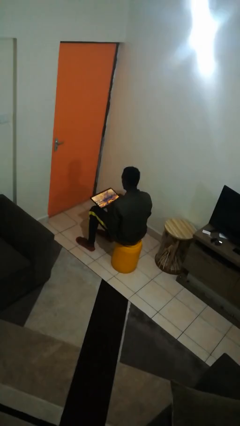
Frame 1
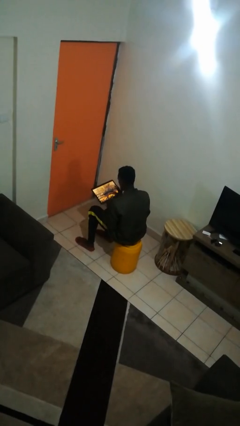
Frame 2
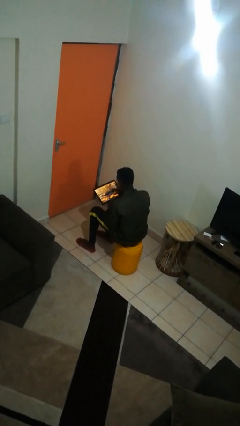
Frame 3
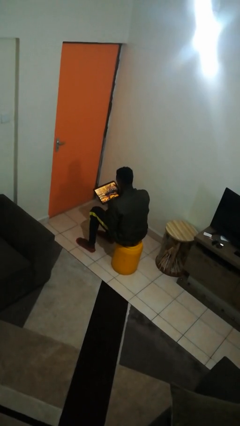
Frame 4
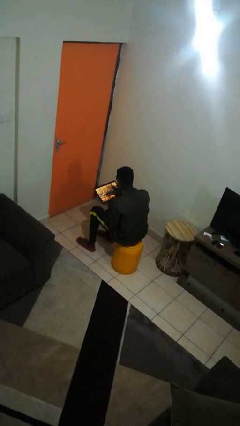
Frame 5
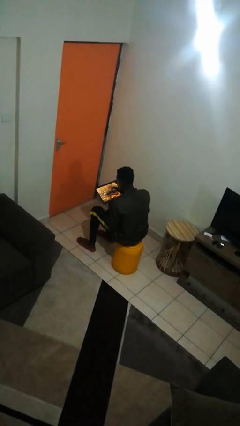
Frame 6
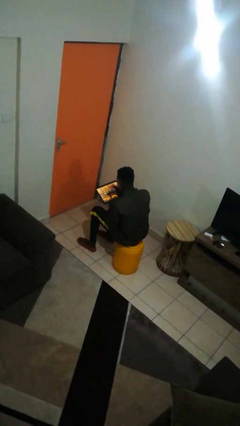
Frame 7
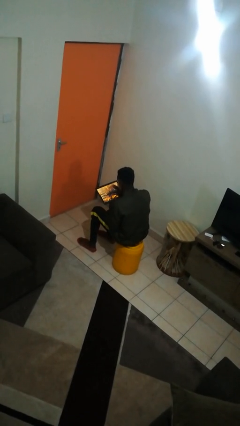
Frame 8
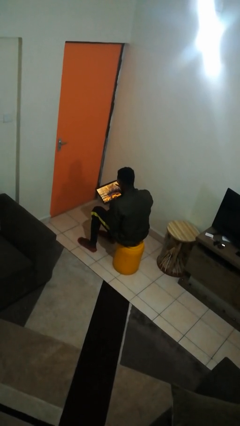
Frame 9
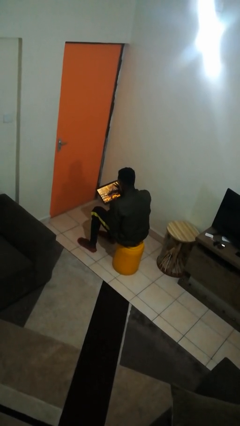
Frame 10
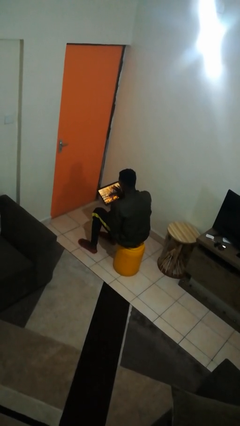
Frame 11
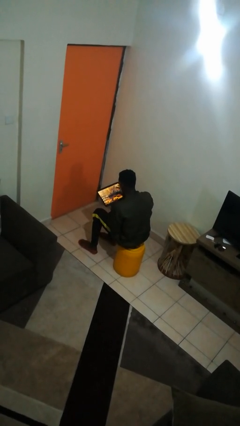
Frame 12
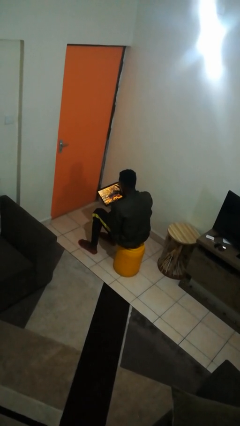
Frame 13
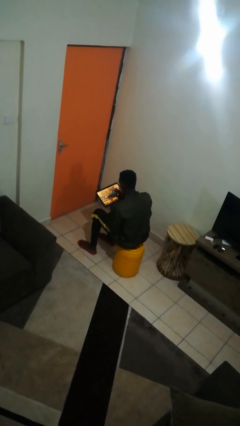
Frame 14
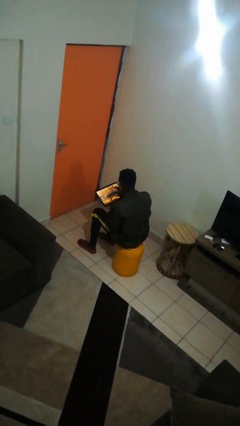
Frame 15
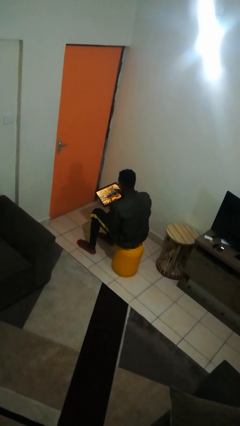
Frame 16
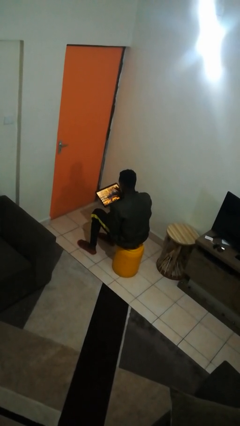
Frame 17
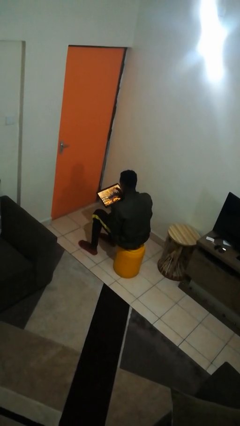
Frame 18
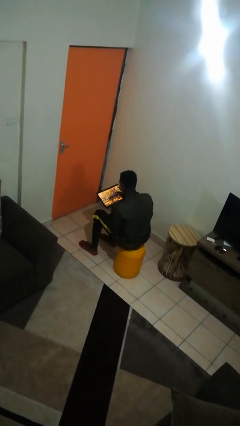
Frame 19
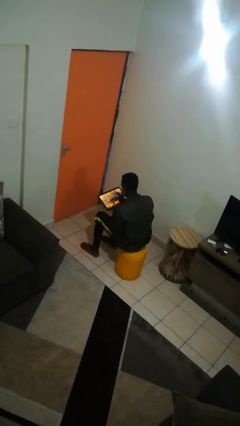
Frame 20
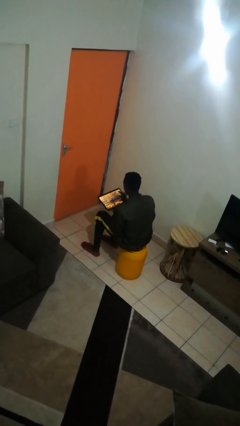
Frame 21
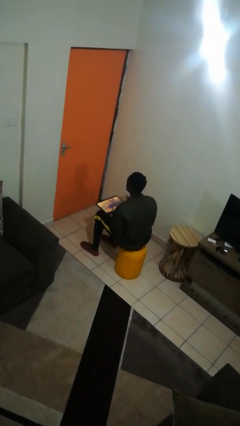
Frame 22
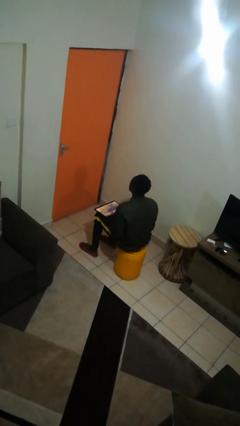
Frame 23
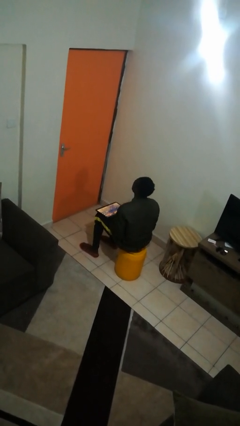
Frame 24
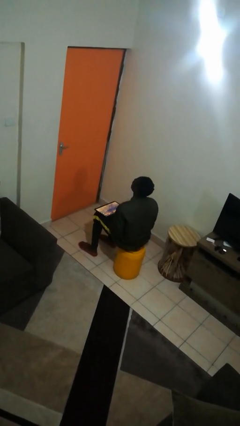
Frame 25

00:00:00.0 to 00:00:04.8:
person interacts with tablet

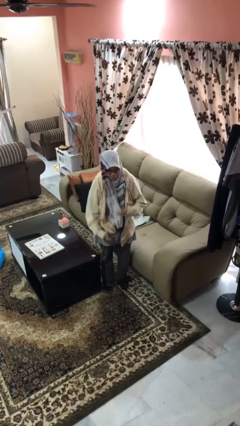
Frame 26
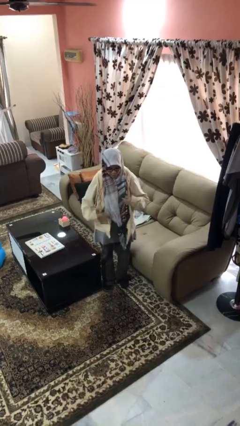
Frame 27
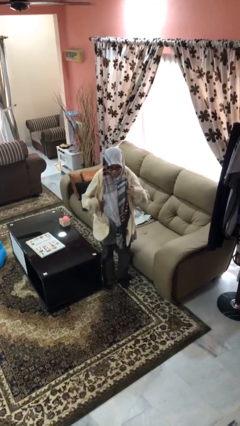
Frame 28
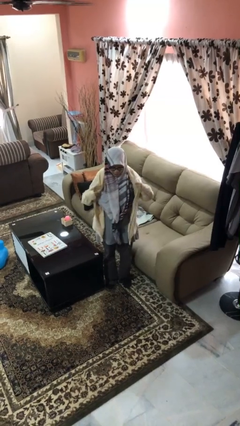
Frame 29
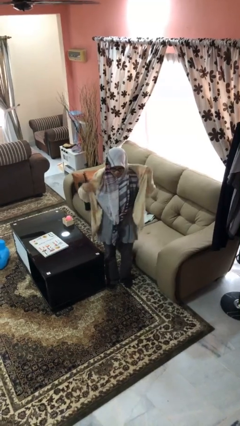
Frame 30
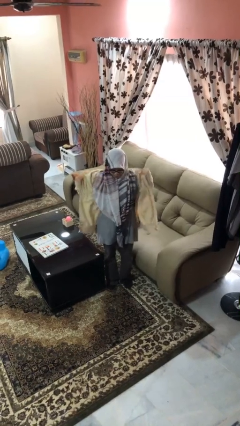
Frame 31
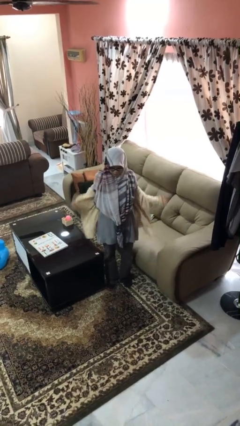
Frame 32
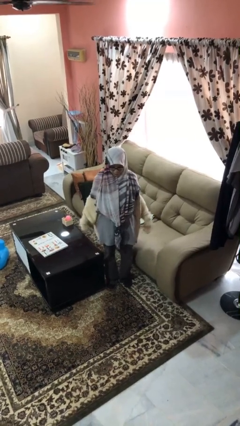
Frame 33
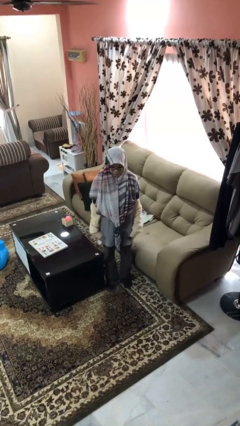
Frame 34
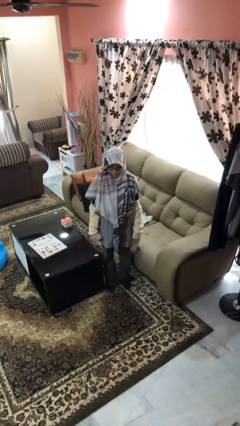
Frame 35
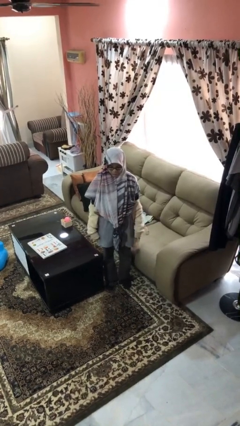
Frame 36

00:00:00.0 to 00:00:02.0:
person takes off jacket

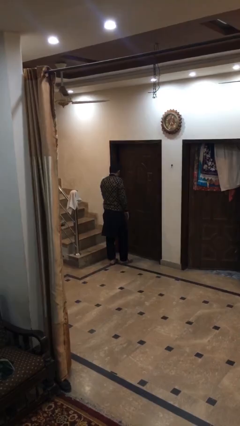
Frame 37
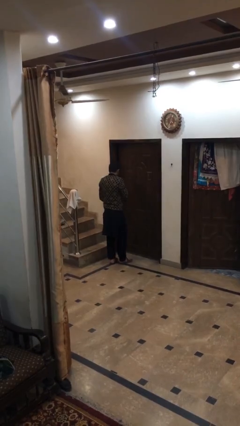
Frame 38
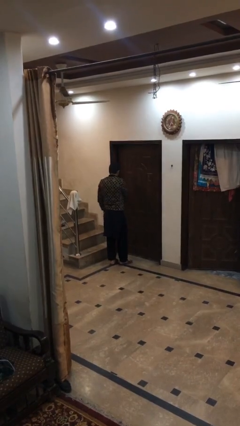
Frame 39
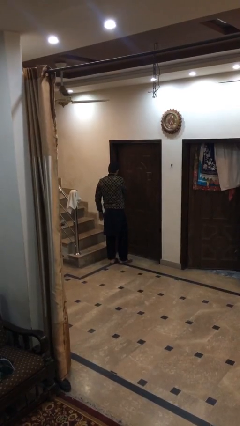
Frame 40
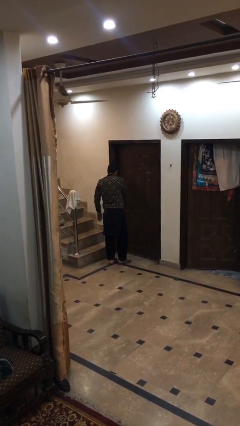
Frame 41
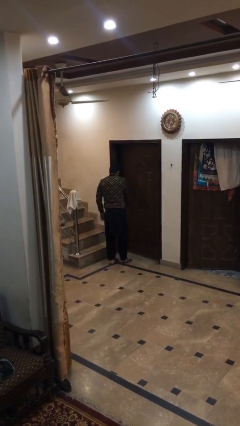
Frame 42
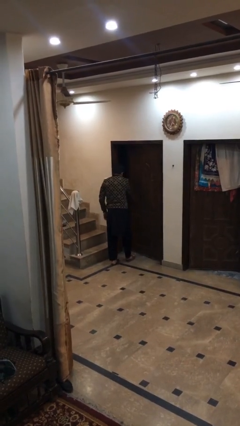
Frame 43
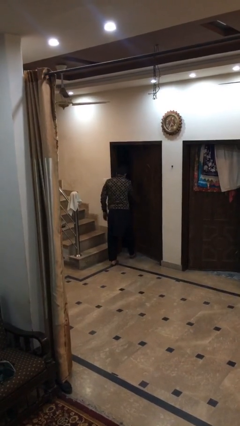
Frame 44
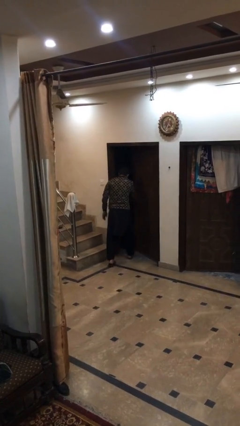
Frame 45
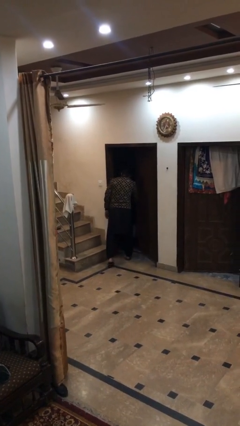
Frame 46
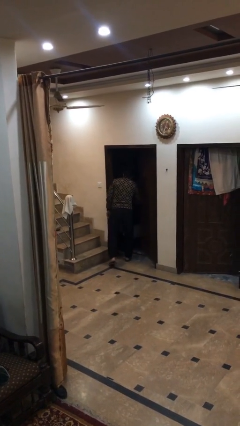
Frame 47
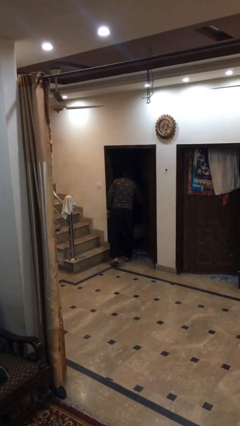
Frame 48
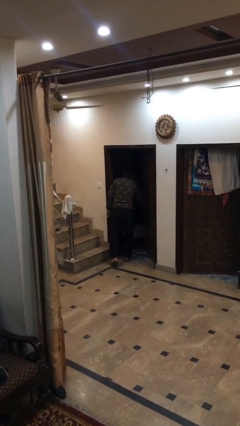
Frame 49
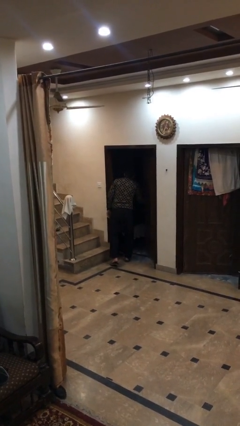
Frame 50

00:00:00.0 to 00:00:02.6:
person opens facility door

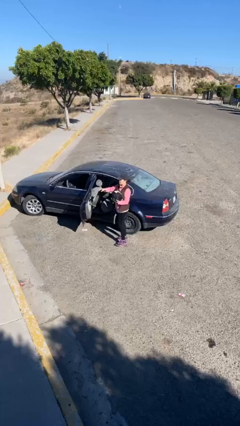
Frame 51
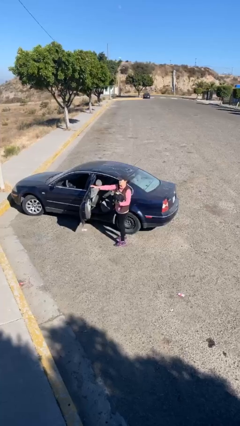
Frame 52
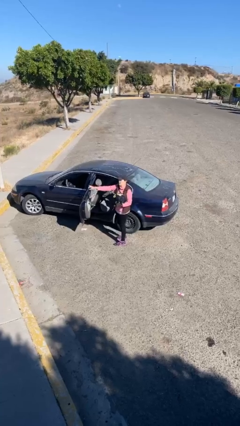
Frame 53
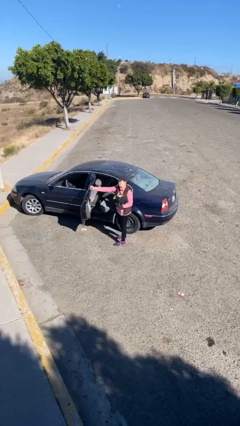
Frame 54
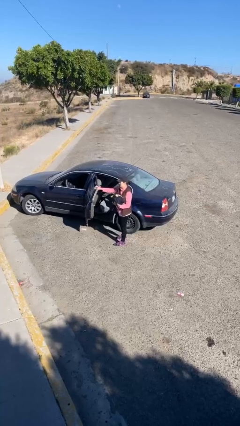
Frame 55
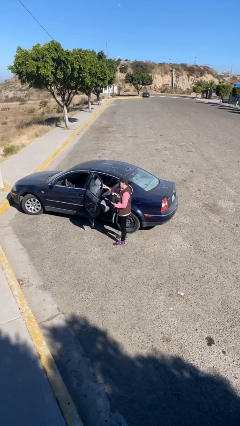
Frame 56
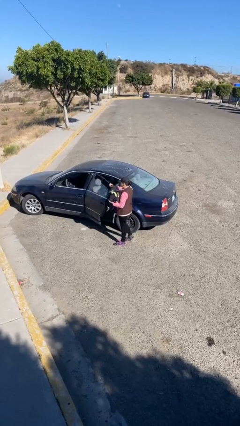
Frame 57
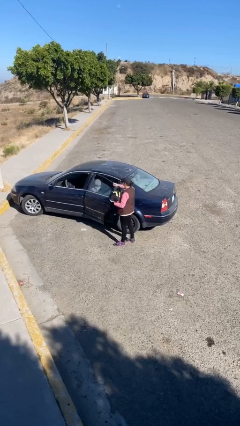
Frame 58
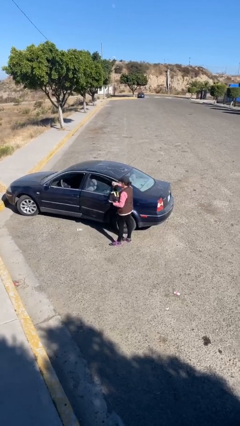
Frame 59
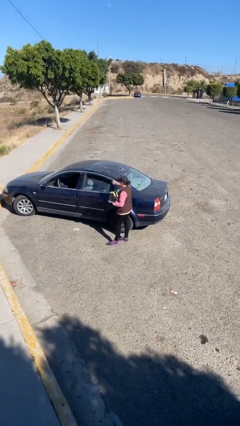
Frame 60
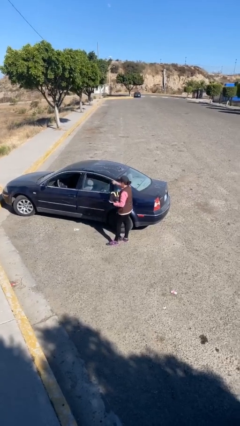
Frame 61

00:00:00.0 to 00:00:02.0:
person closes car door

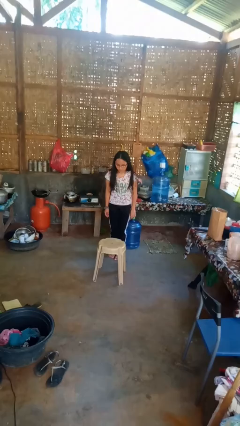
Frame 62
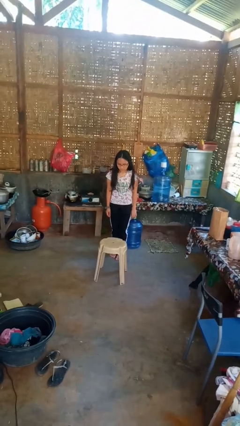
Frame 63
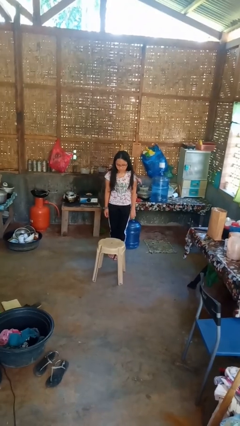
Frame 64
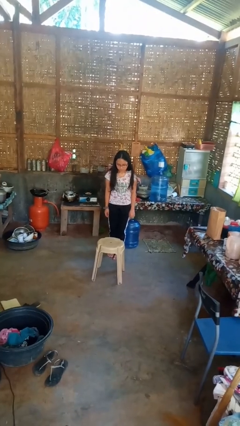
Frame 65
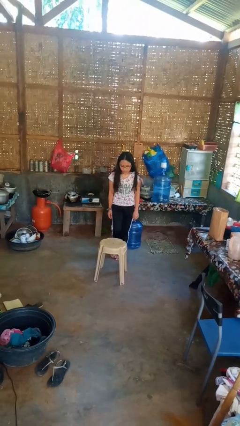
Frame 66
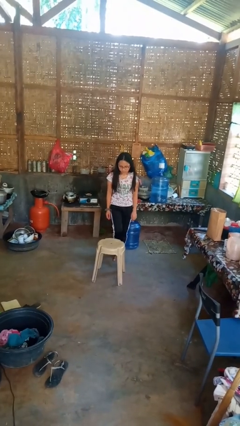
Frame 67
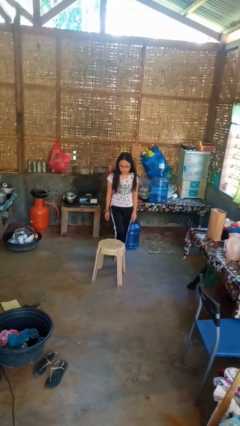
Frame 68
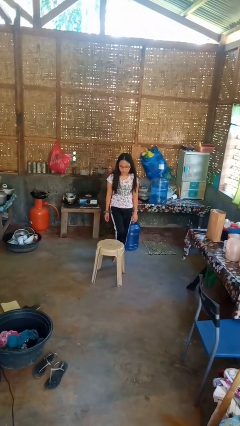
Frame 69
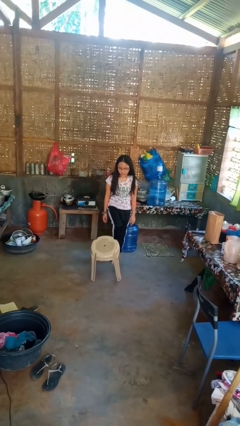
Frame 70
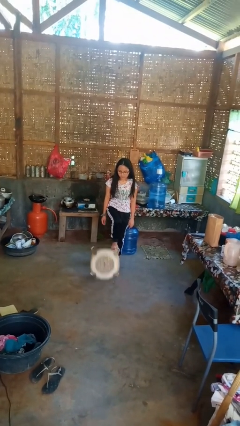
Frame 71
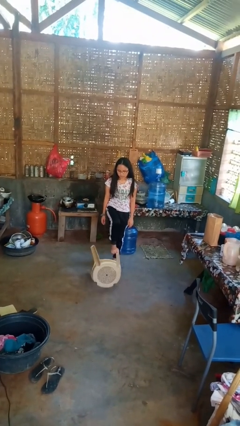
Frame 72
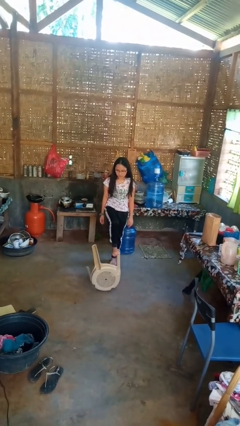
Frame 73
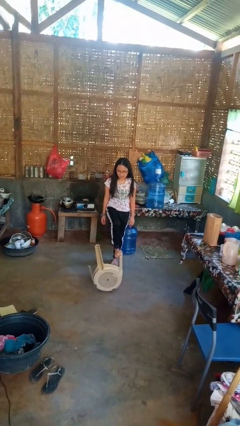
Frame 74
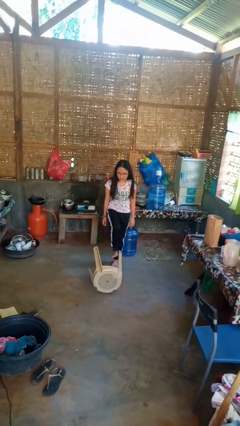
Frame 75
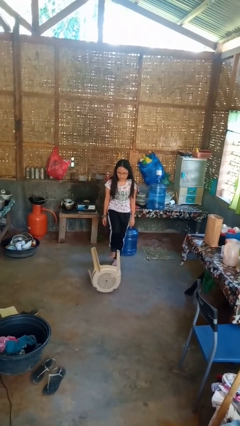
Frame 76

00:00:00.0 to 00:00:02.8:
person knocks over furniture

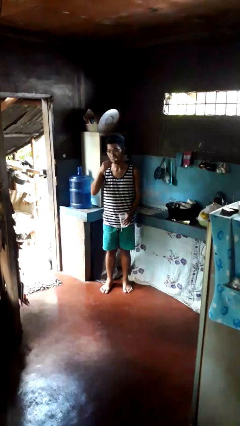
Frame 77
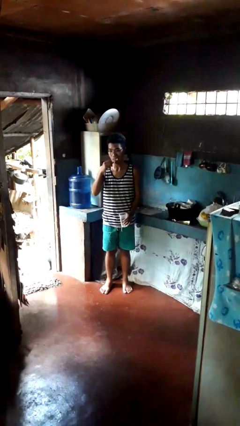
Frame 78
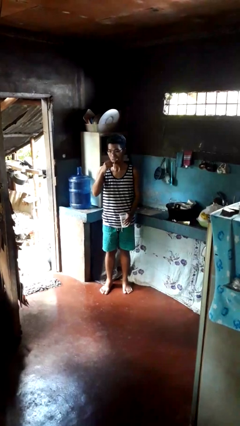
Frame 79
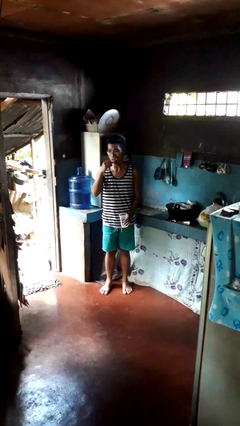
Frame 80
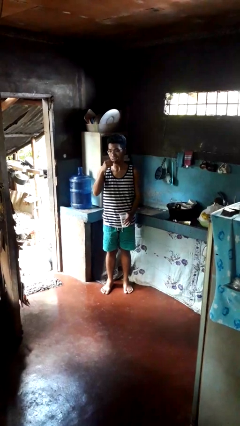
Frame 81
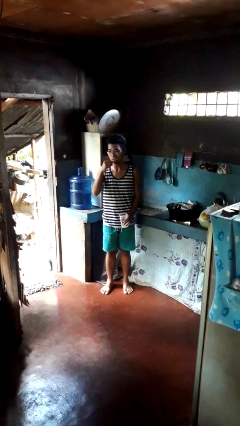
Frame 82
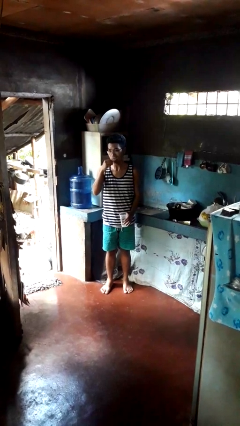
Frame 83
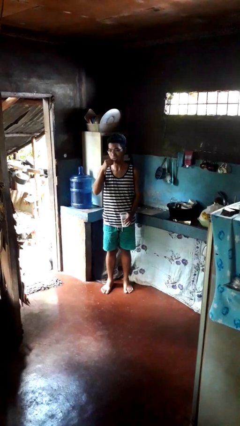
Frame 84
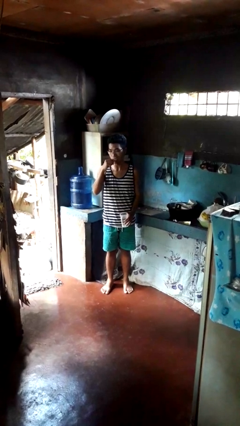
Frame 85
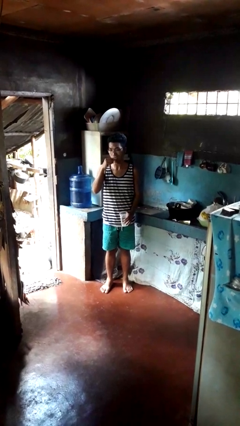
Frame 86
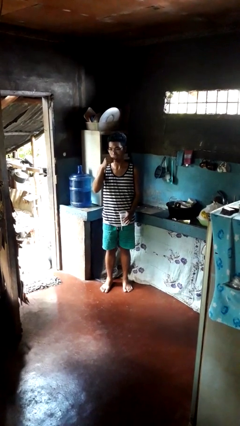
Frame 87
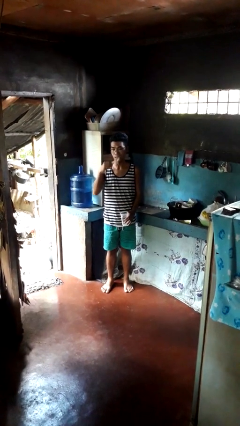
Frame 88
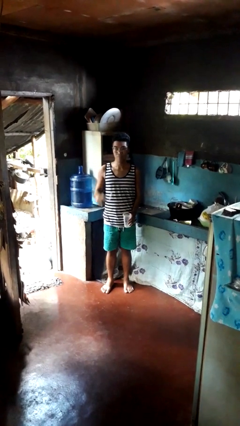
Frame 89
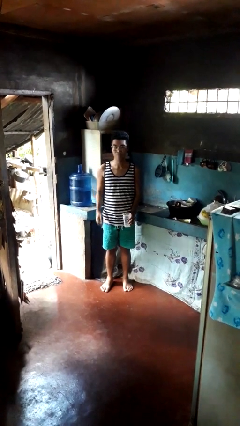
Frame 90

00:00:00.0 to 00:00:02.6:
person brushes teeth

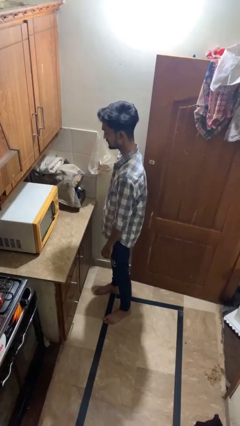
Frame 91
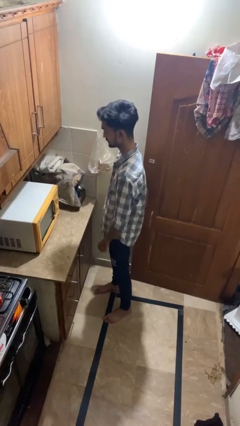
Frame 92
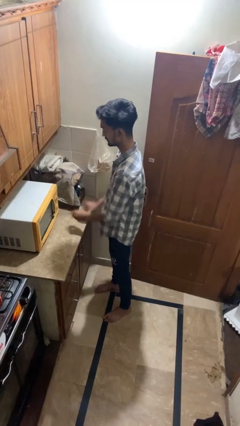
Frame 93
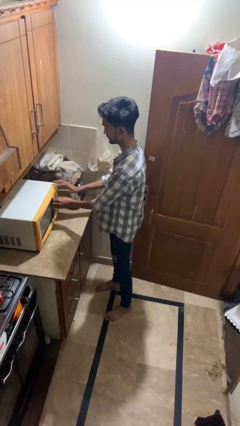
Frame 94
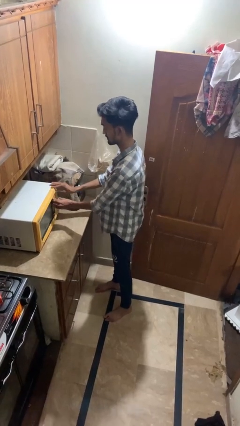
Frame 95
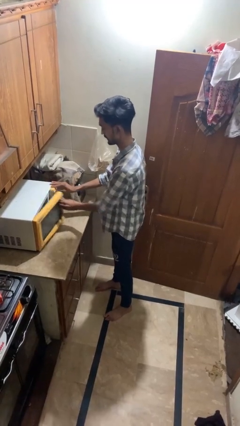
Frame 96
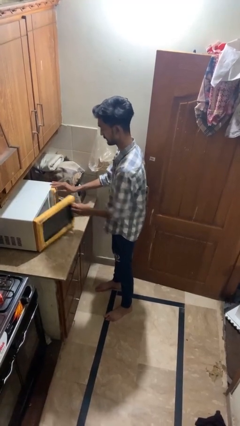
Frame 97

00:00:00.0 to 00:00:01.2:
person takes object from microwave
